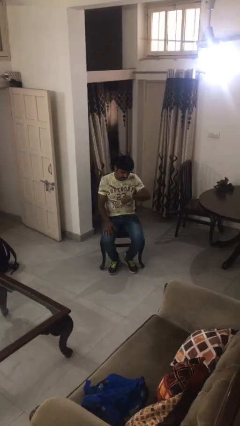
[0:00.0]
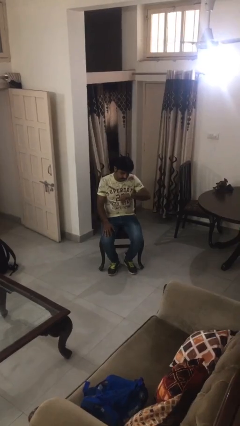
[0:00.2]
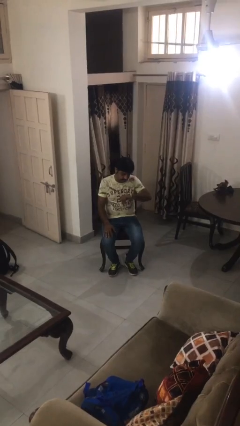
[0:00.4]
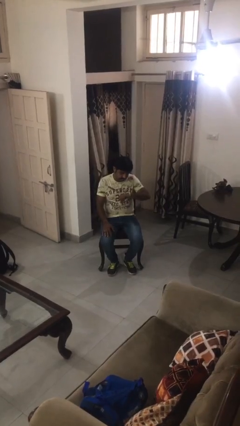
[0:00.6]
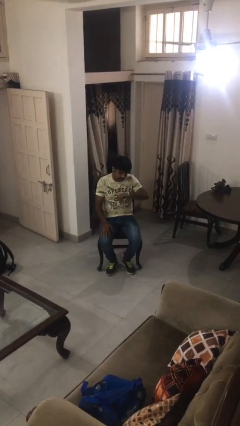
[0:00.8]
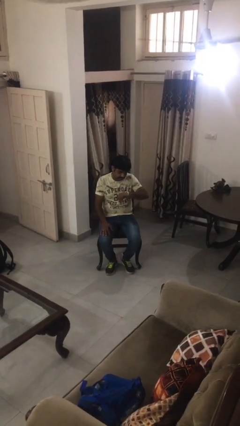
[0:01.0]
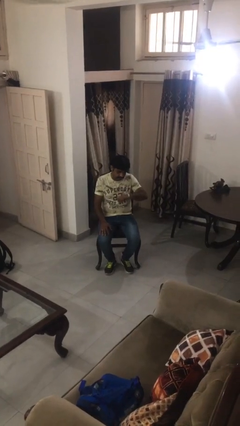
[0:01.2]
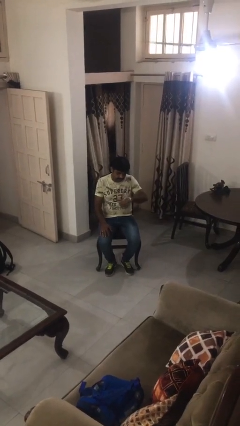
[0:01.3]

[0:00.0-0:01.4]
person looks at wristwatch

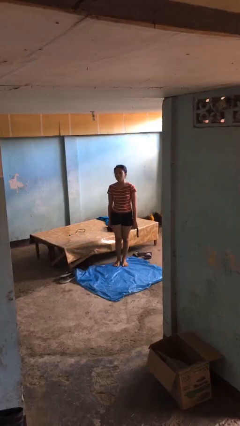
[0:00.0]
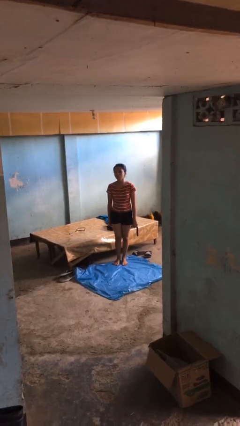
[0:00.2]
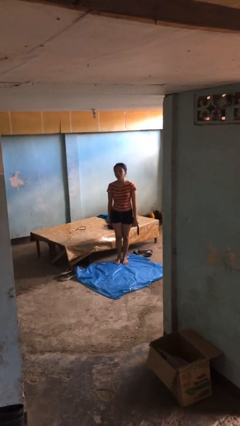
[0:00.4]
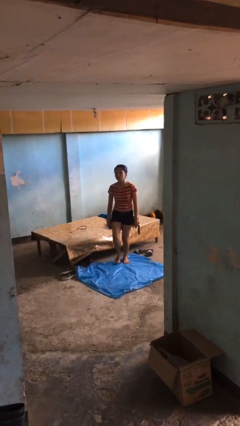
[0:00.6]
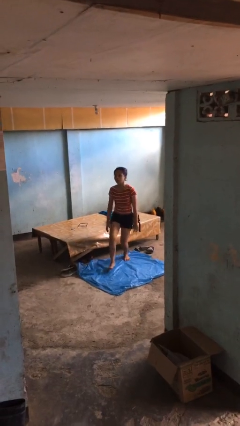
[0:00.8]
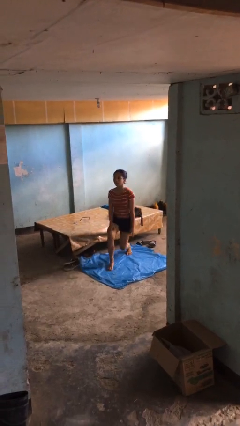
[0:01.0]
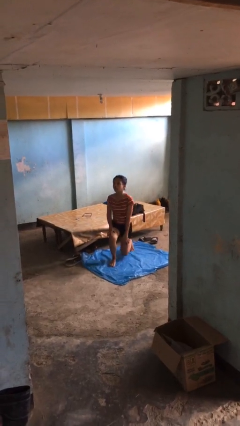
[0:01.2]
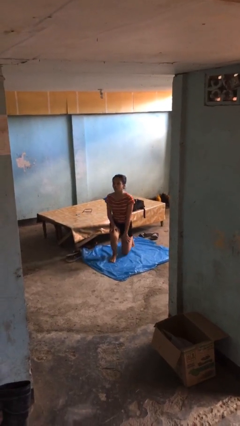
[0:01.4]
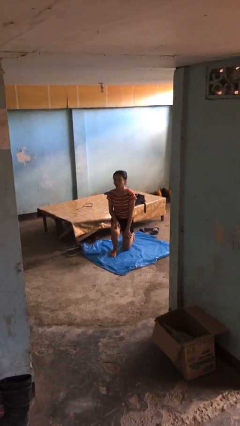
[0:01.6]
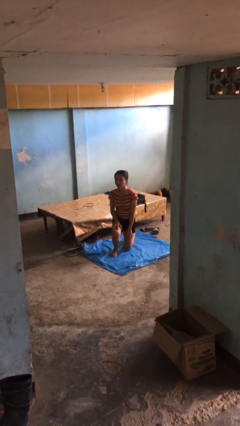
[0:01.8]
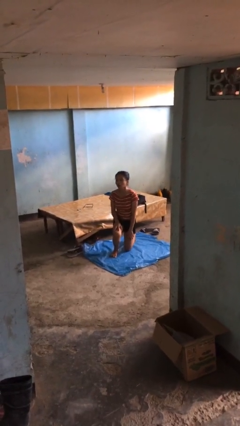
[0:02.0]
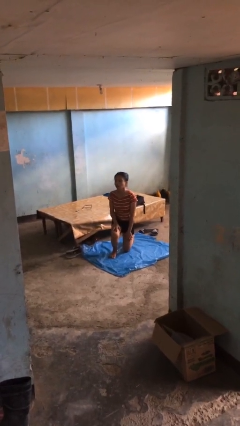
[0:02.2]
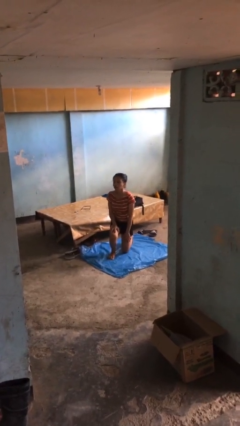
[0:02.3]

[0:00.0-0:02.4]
person kneels

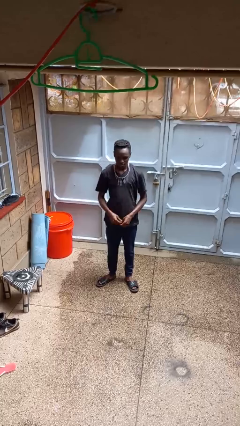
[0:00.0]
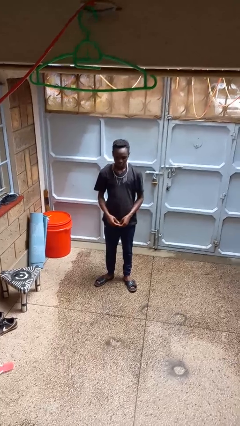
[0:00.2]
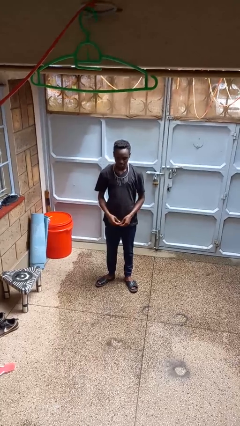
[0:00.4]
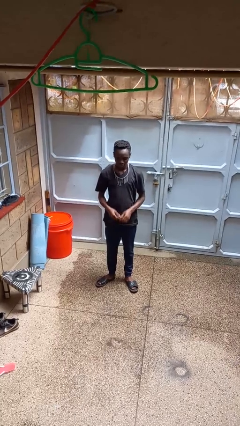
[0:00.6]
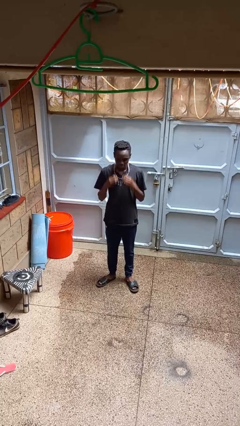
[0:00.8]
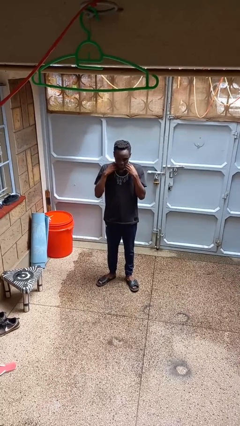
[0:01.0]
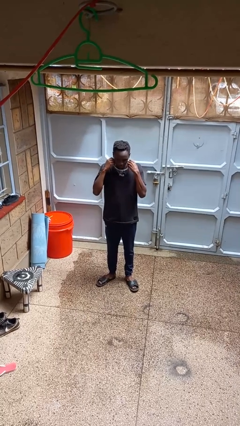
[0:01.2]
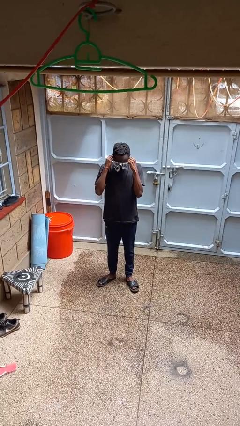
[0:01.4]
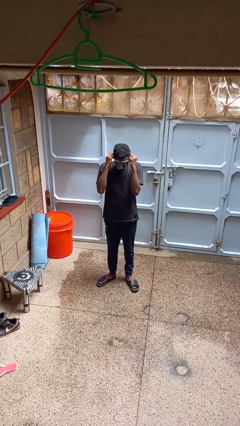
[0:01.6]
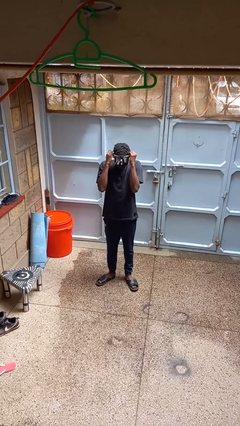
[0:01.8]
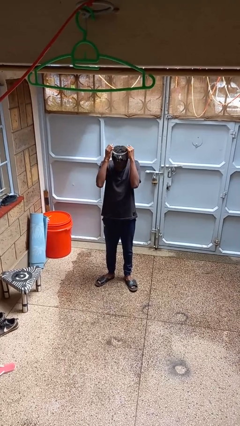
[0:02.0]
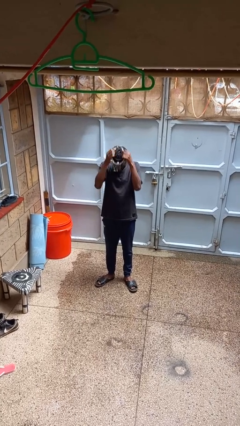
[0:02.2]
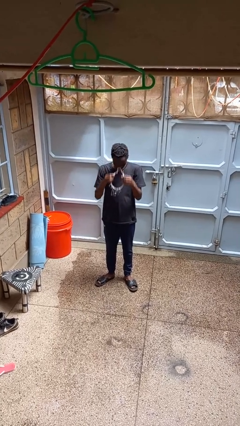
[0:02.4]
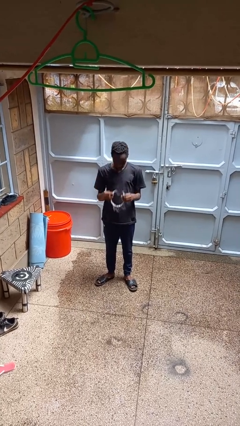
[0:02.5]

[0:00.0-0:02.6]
person takes off necklace

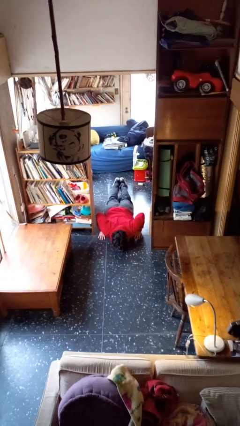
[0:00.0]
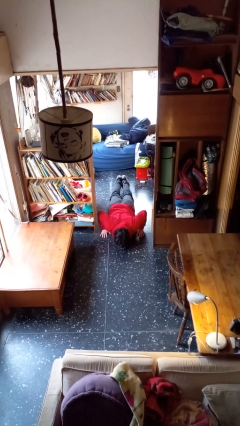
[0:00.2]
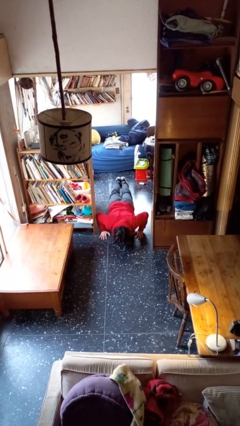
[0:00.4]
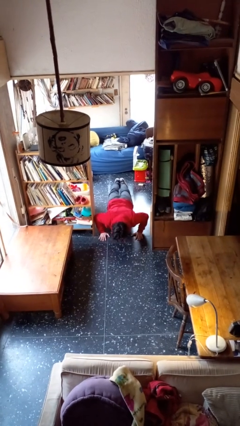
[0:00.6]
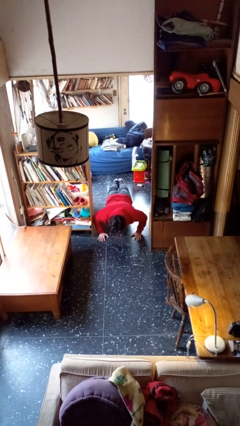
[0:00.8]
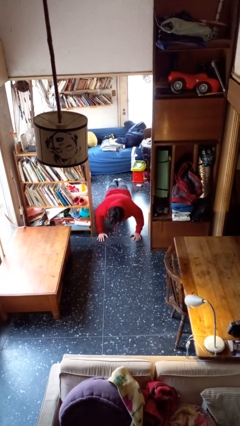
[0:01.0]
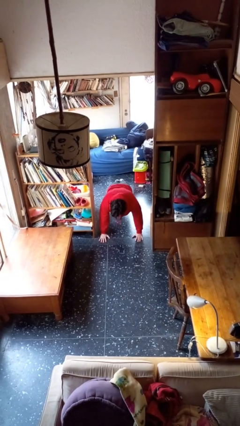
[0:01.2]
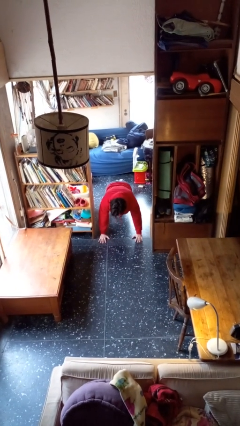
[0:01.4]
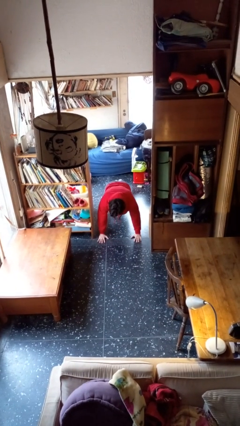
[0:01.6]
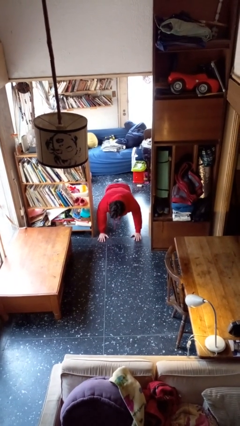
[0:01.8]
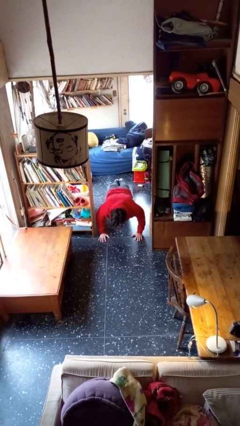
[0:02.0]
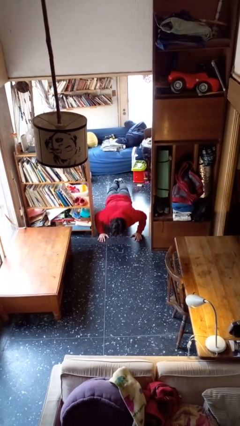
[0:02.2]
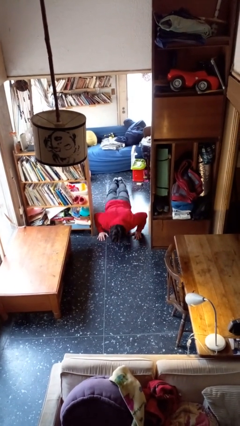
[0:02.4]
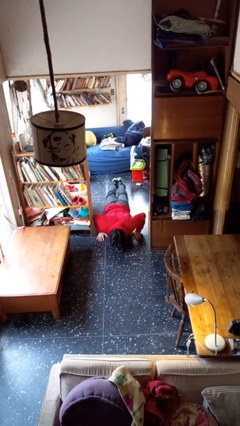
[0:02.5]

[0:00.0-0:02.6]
person exercises with pushup

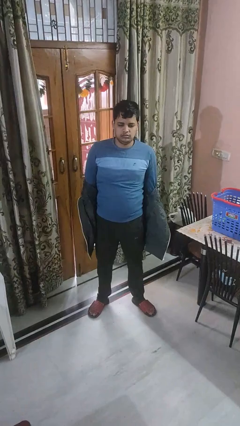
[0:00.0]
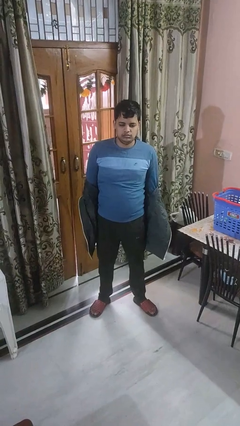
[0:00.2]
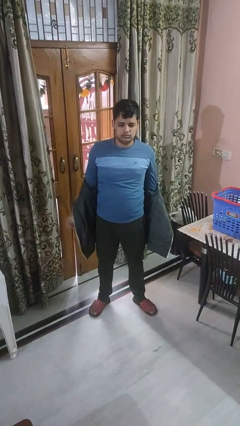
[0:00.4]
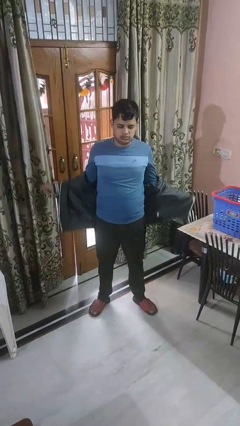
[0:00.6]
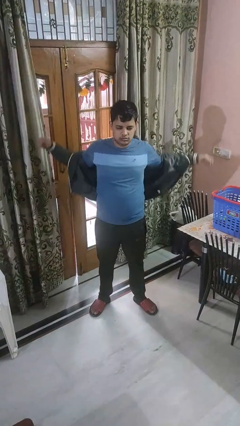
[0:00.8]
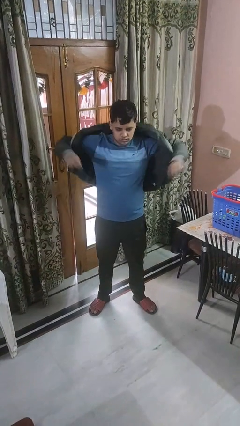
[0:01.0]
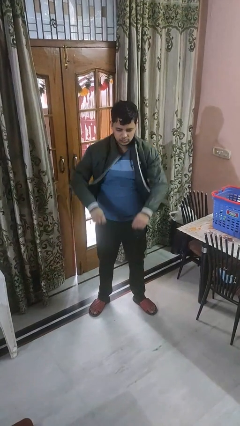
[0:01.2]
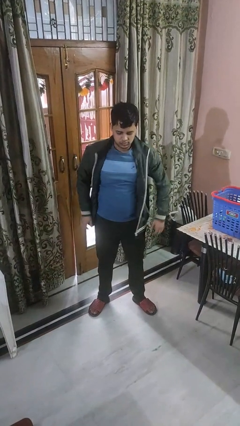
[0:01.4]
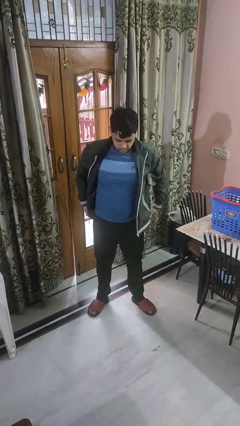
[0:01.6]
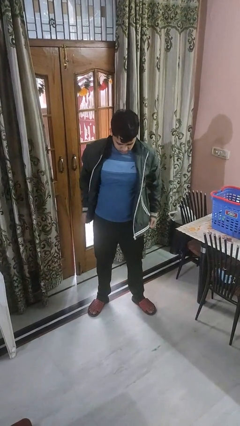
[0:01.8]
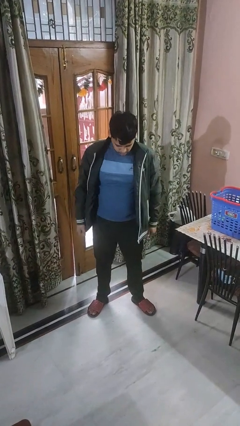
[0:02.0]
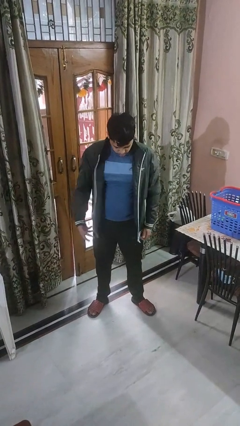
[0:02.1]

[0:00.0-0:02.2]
person puts on jacket

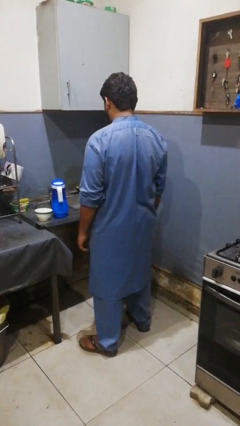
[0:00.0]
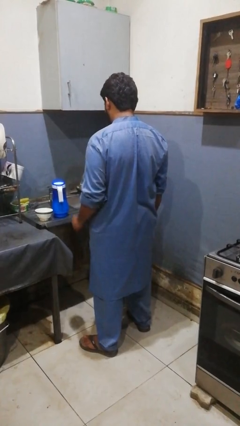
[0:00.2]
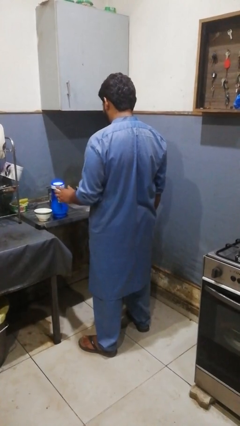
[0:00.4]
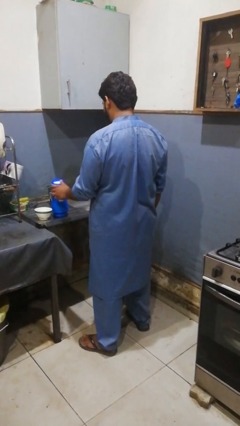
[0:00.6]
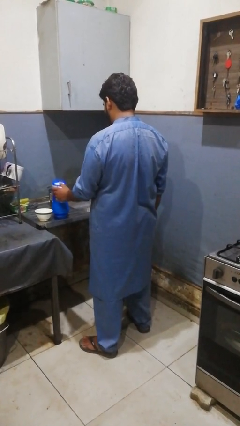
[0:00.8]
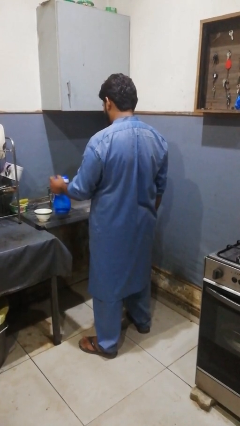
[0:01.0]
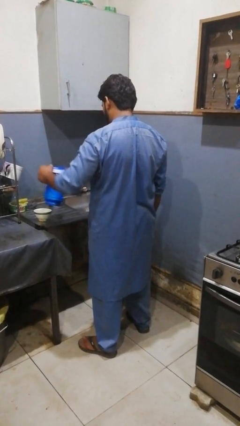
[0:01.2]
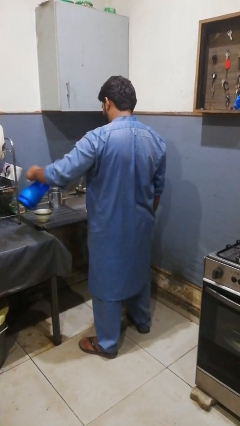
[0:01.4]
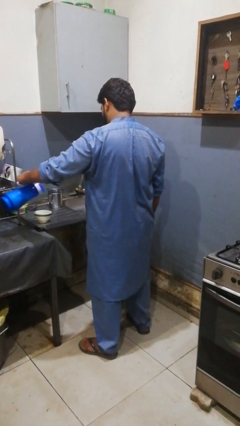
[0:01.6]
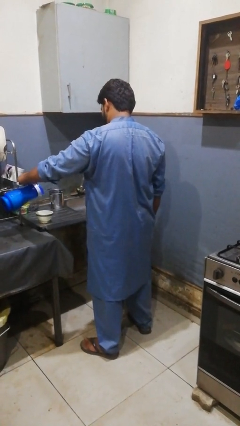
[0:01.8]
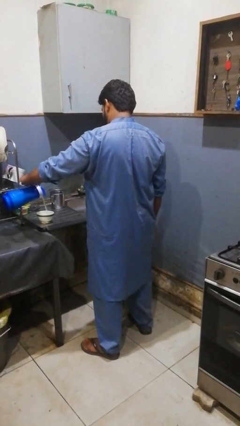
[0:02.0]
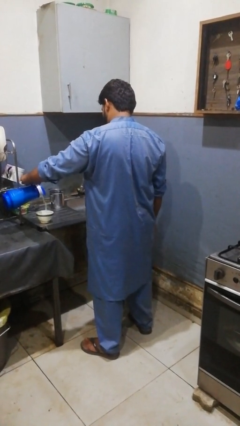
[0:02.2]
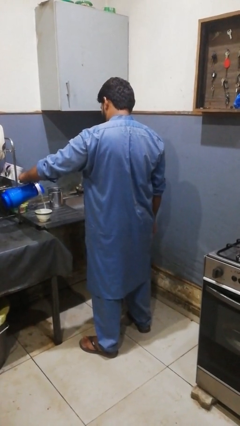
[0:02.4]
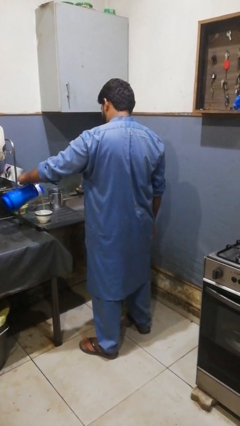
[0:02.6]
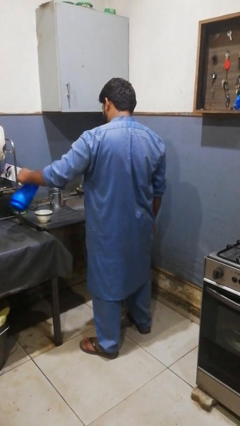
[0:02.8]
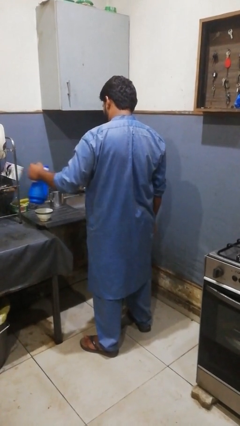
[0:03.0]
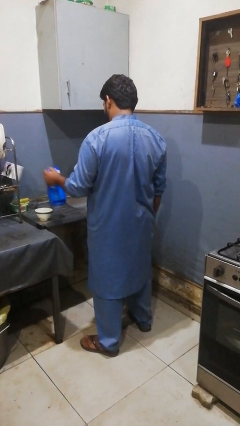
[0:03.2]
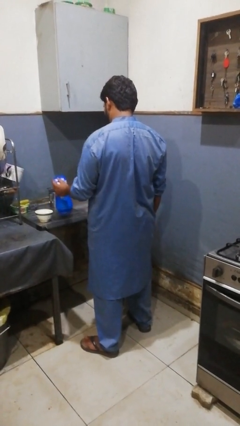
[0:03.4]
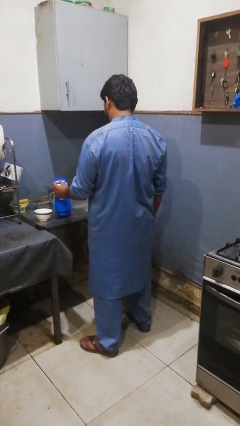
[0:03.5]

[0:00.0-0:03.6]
person pours into bowl

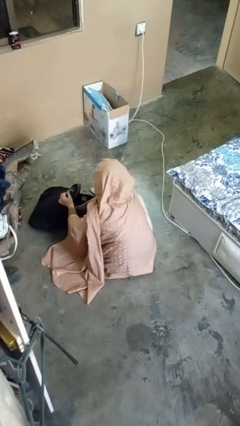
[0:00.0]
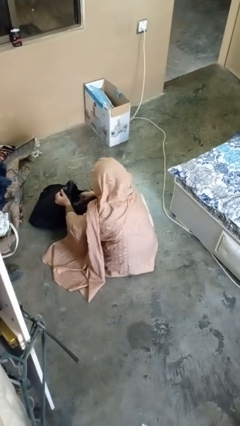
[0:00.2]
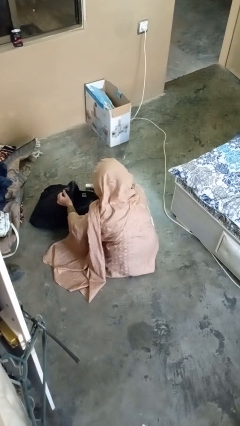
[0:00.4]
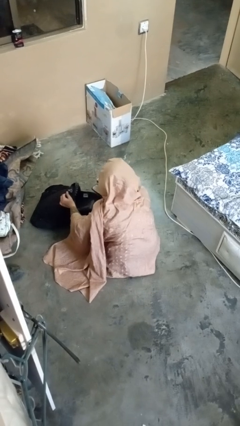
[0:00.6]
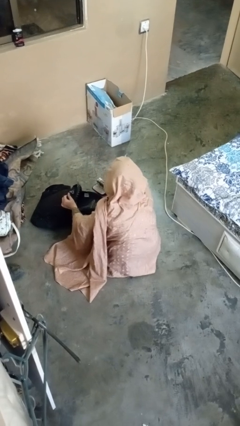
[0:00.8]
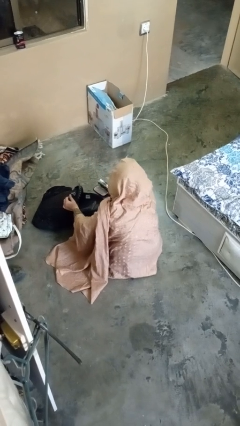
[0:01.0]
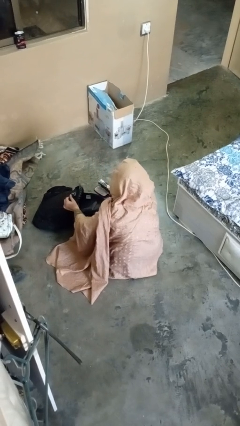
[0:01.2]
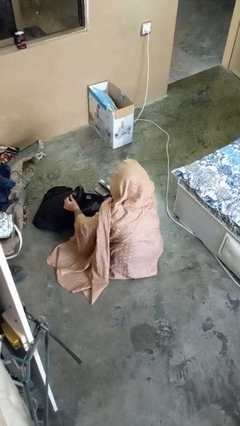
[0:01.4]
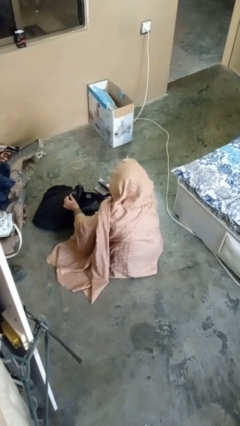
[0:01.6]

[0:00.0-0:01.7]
person takes object from backpack

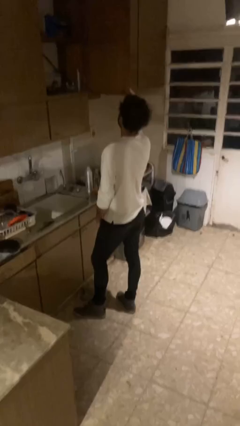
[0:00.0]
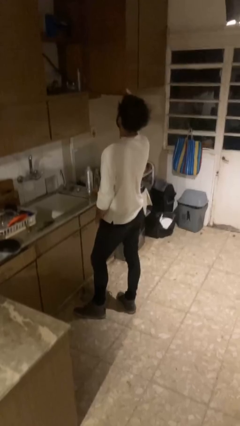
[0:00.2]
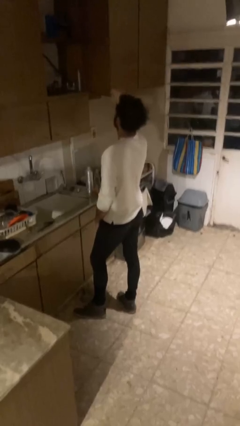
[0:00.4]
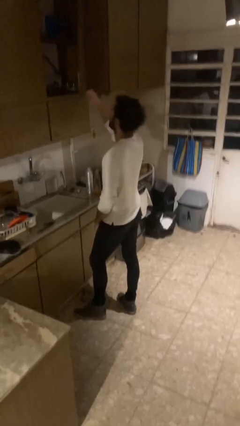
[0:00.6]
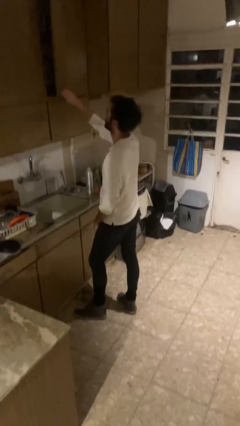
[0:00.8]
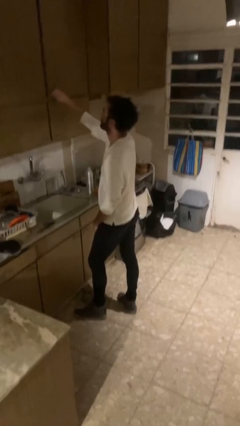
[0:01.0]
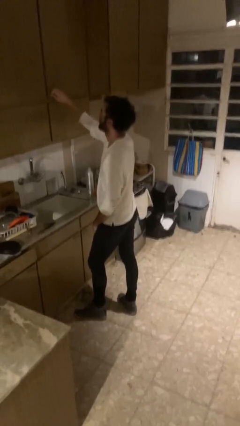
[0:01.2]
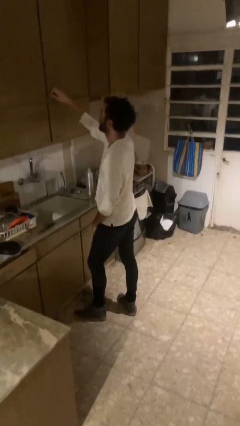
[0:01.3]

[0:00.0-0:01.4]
person closes cabinet
